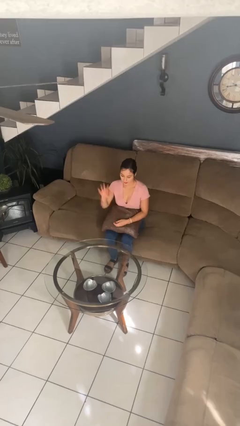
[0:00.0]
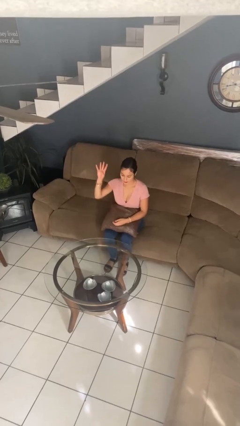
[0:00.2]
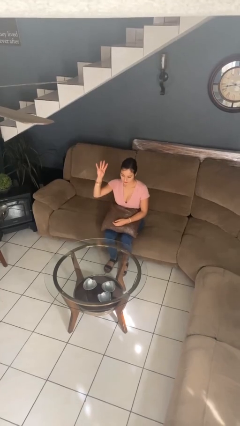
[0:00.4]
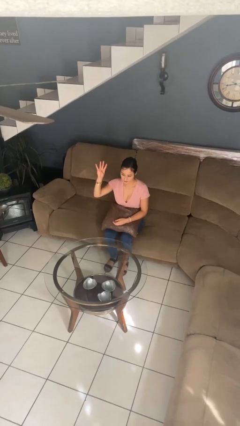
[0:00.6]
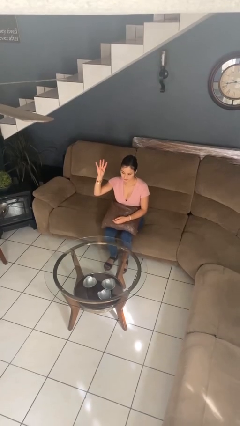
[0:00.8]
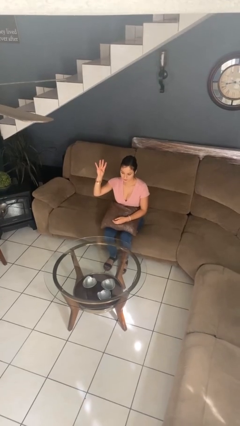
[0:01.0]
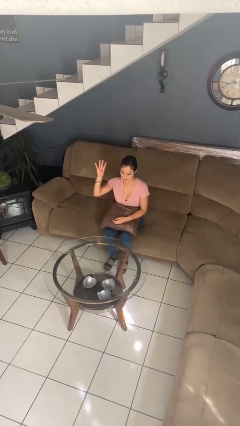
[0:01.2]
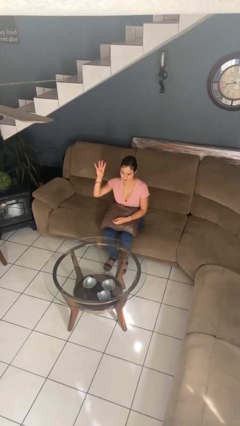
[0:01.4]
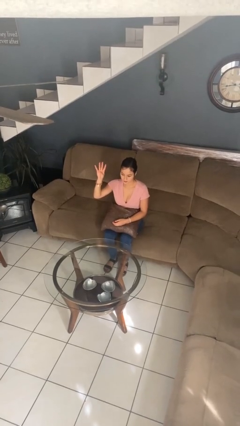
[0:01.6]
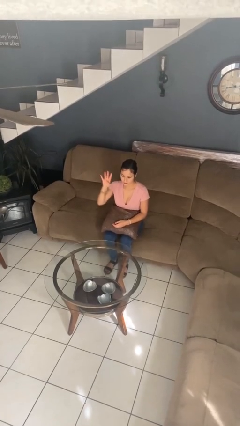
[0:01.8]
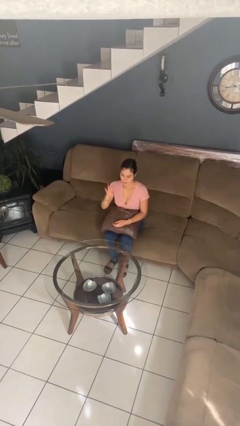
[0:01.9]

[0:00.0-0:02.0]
person gestures number four

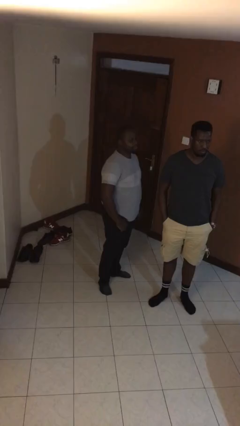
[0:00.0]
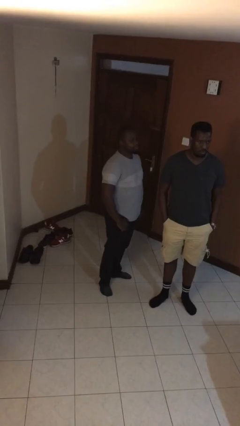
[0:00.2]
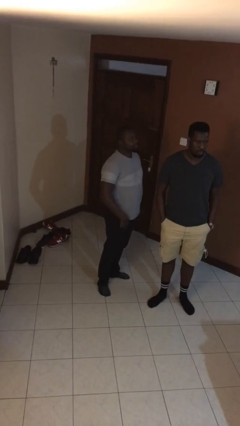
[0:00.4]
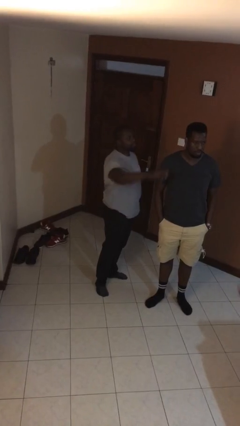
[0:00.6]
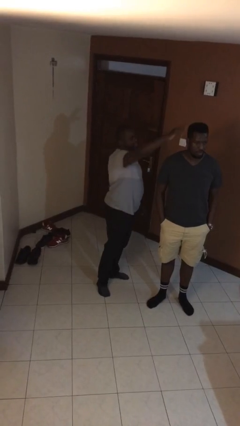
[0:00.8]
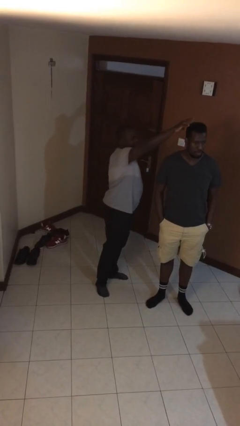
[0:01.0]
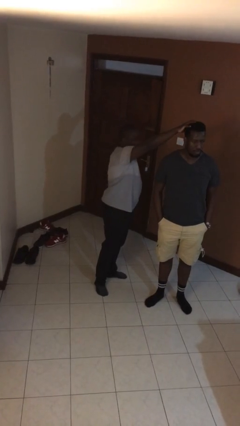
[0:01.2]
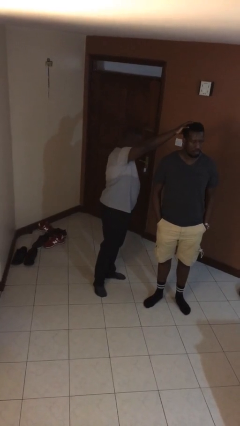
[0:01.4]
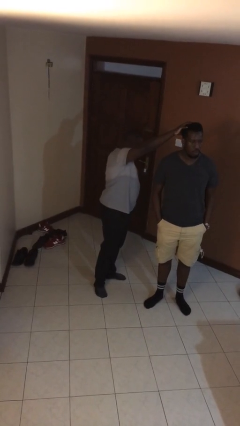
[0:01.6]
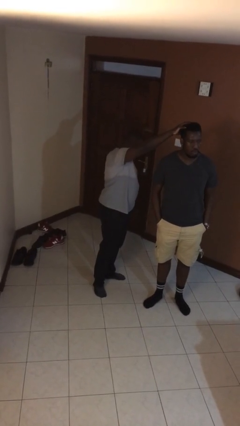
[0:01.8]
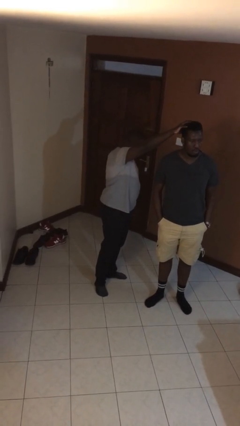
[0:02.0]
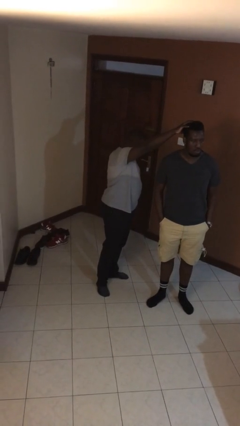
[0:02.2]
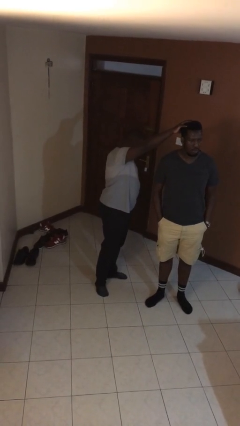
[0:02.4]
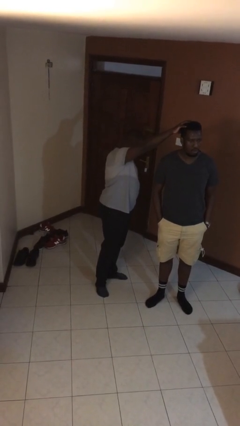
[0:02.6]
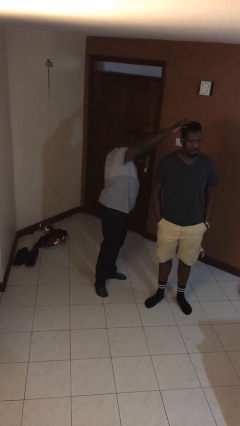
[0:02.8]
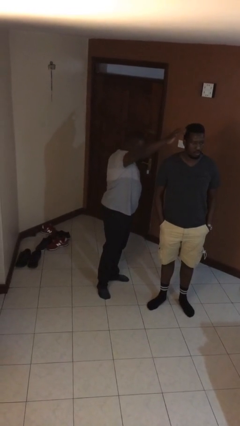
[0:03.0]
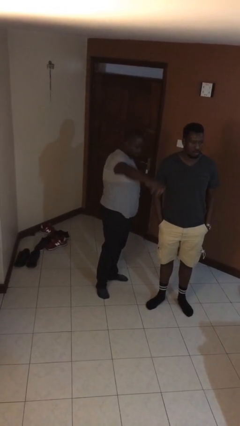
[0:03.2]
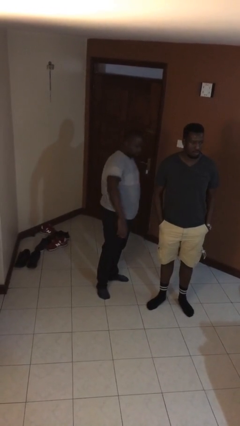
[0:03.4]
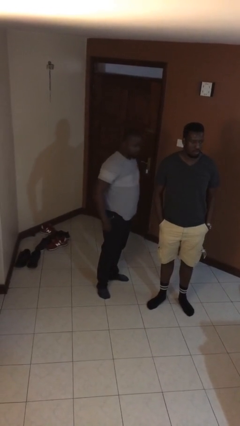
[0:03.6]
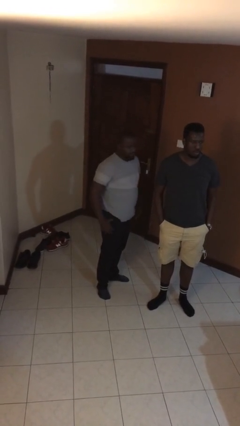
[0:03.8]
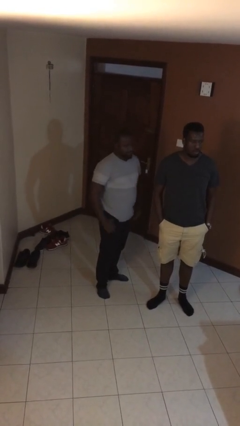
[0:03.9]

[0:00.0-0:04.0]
person grabs person by hair

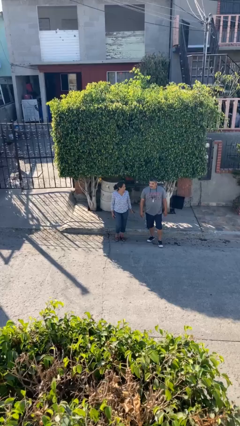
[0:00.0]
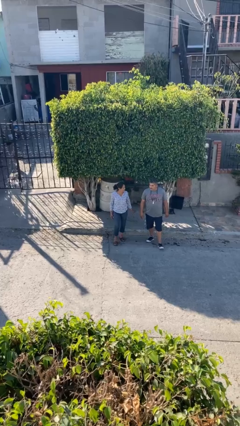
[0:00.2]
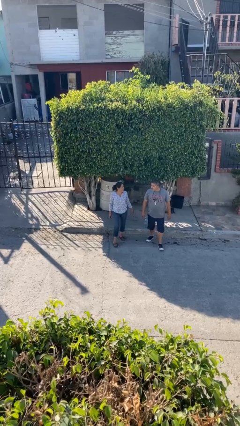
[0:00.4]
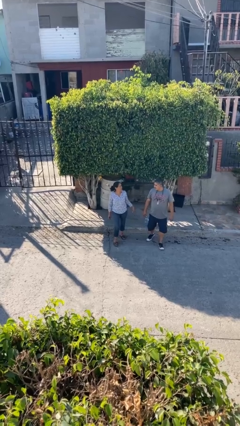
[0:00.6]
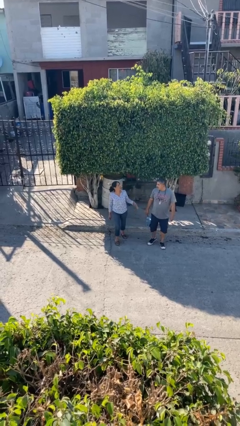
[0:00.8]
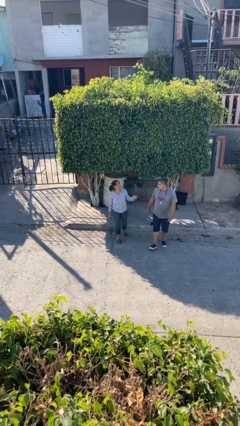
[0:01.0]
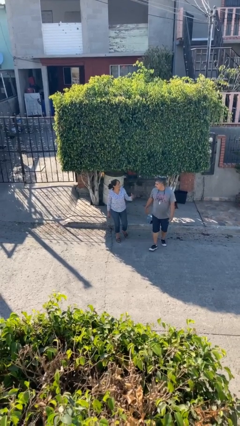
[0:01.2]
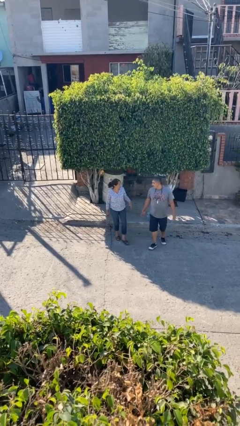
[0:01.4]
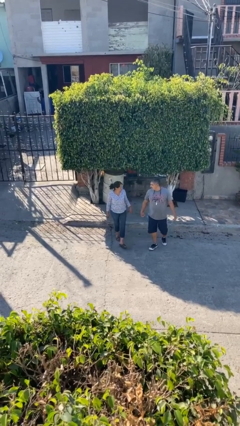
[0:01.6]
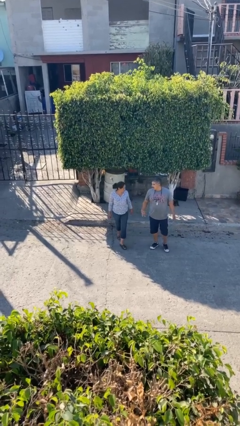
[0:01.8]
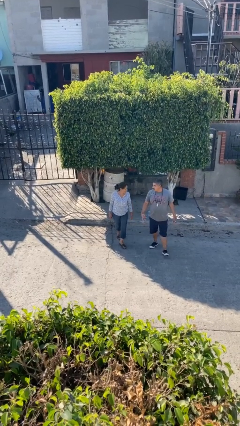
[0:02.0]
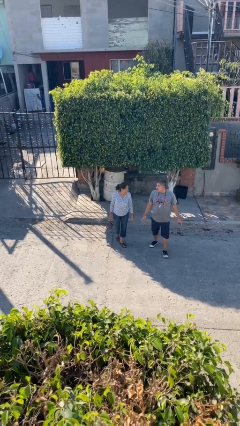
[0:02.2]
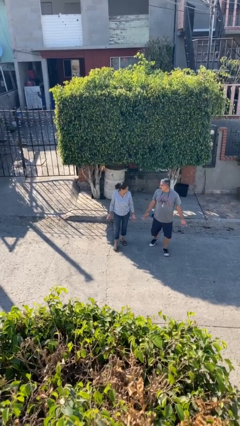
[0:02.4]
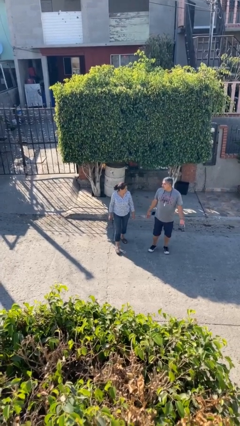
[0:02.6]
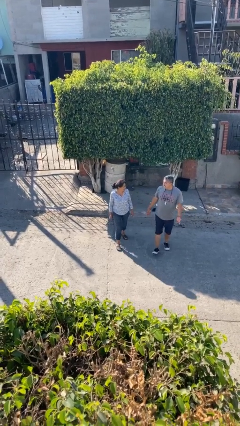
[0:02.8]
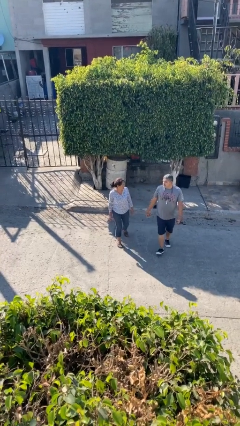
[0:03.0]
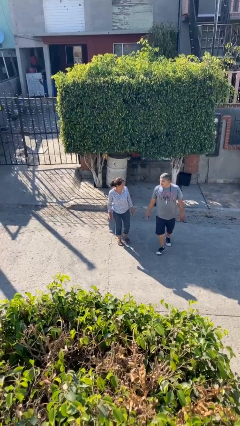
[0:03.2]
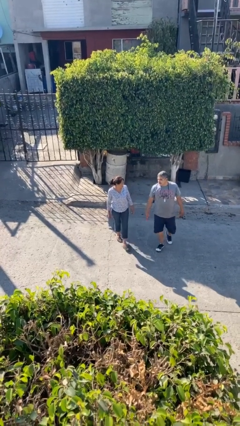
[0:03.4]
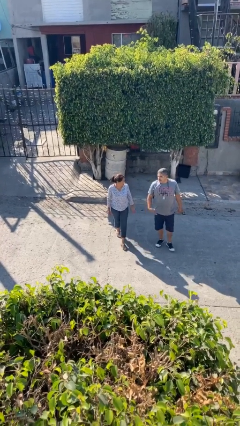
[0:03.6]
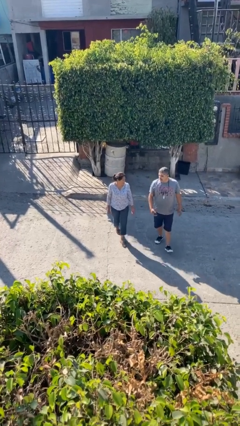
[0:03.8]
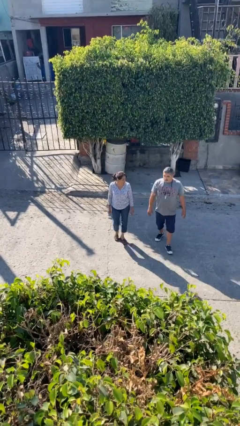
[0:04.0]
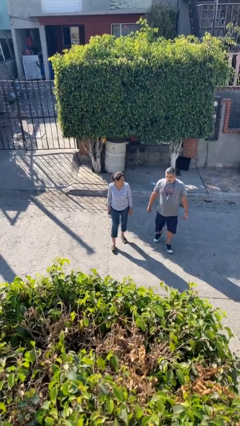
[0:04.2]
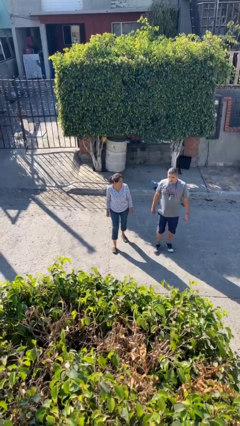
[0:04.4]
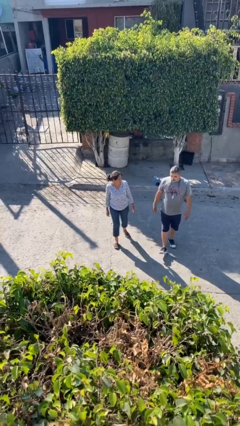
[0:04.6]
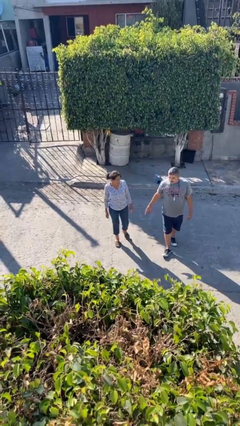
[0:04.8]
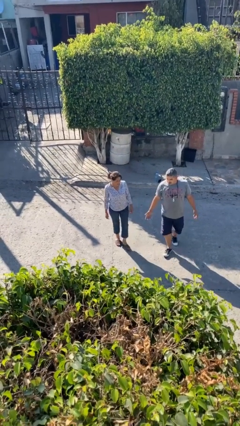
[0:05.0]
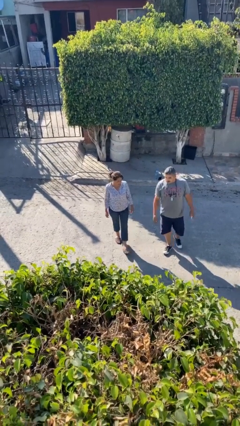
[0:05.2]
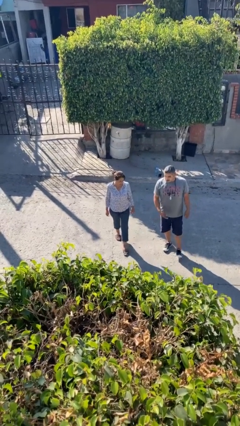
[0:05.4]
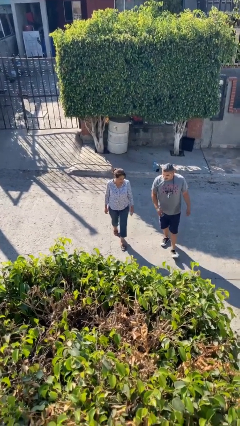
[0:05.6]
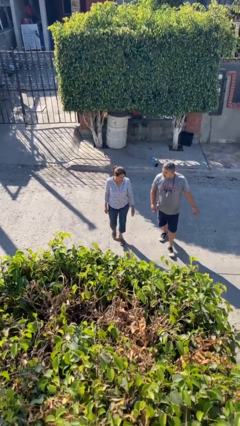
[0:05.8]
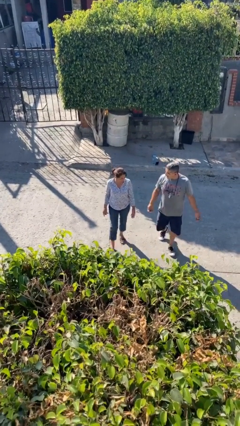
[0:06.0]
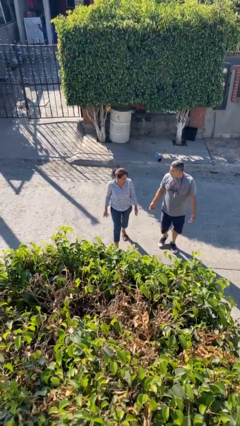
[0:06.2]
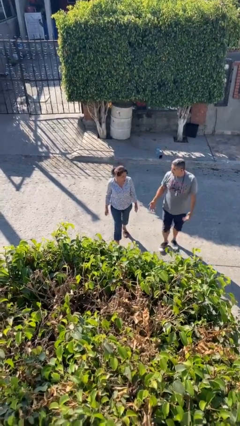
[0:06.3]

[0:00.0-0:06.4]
person talks to person

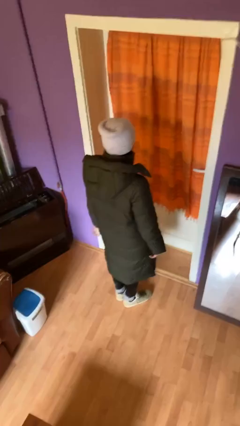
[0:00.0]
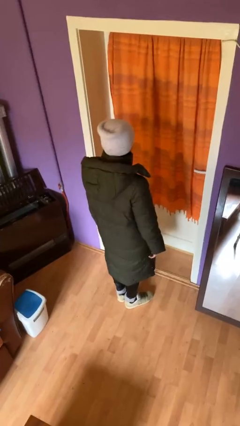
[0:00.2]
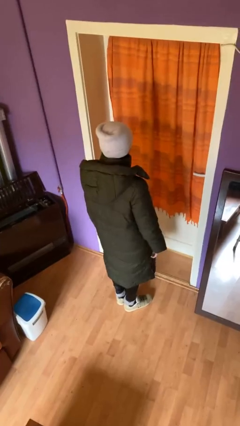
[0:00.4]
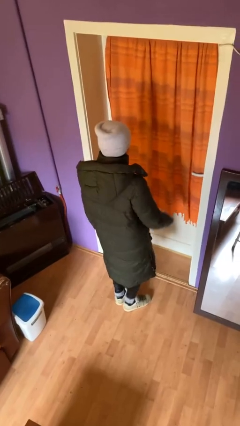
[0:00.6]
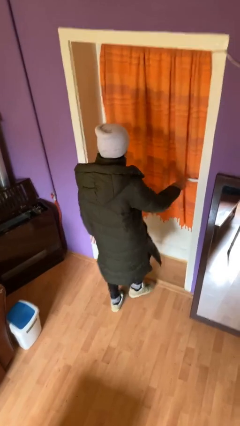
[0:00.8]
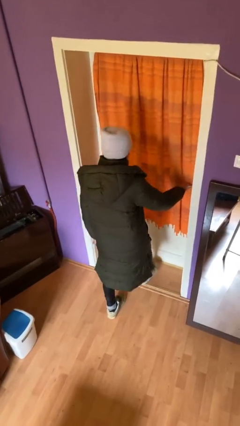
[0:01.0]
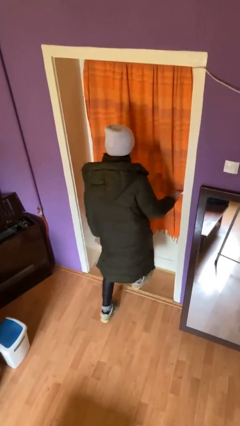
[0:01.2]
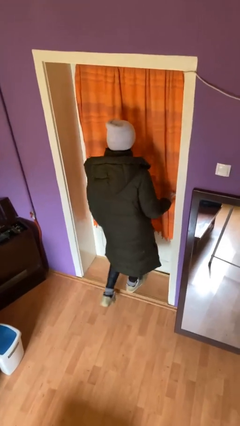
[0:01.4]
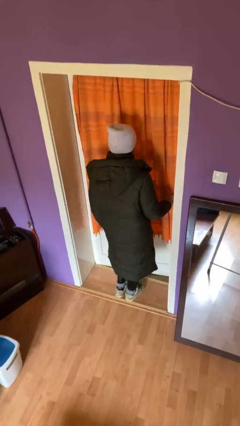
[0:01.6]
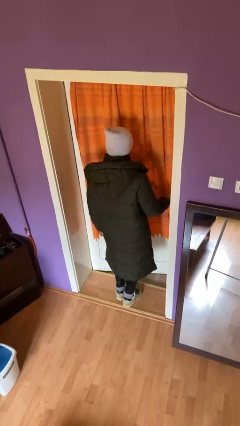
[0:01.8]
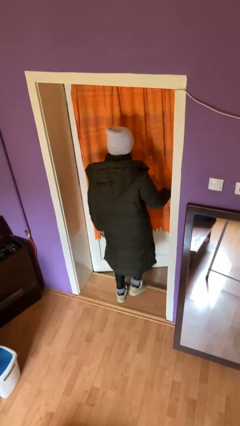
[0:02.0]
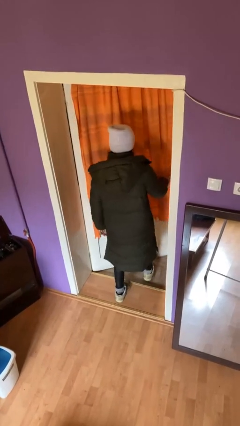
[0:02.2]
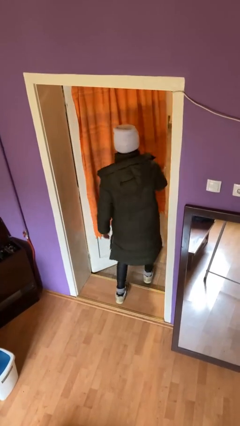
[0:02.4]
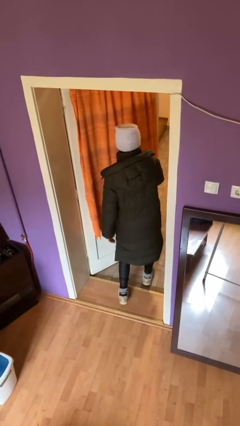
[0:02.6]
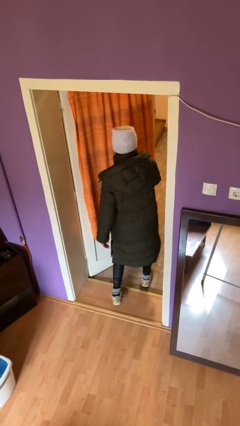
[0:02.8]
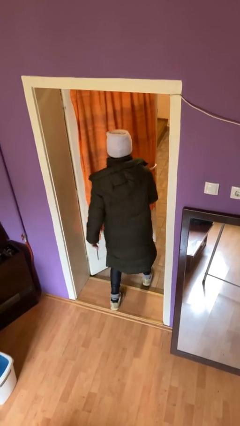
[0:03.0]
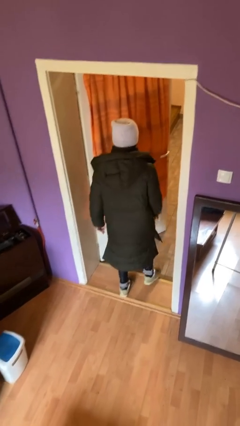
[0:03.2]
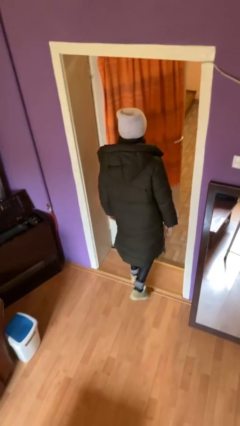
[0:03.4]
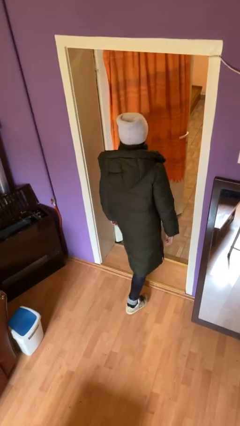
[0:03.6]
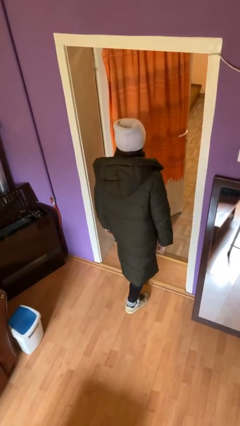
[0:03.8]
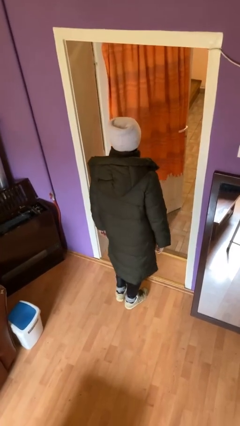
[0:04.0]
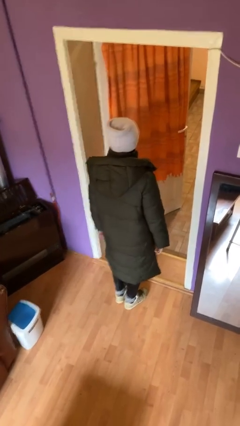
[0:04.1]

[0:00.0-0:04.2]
person opens facility door

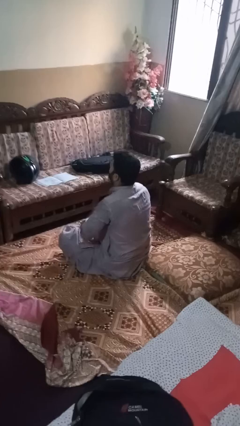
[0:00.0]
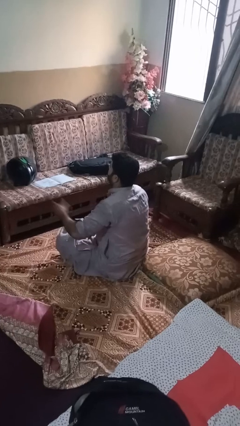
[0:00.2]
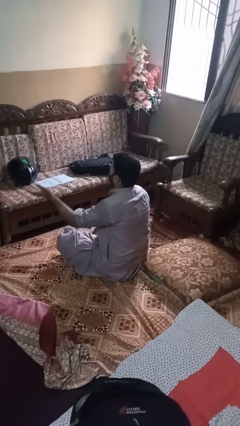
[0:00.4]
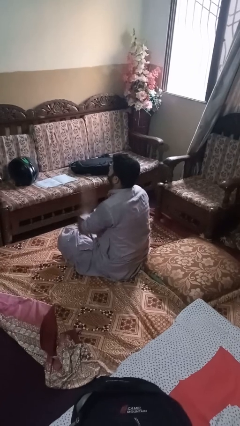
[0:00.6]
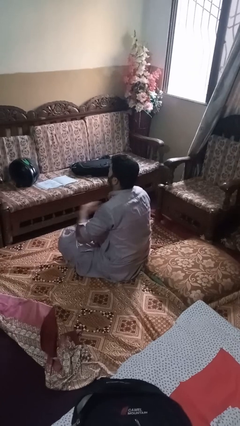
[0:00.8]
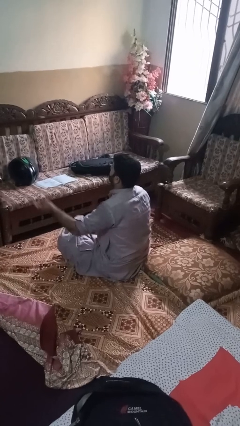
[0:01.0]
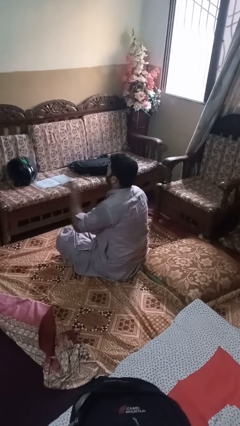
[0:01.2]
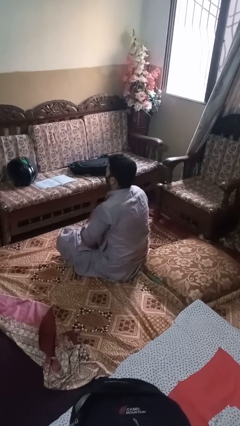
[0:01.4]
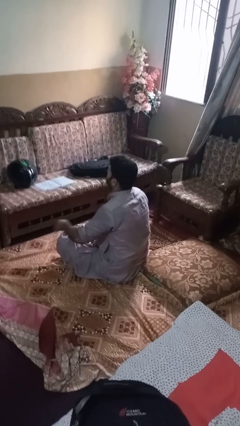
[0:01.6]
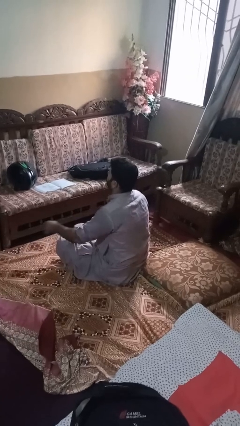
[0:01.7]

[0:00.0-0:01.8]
person drums on chest
